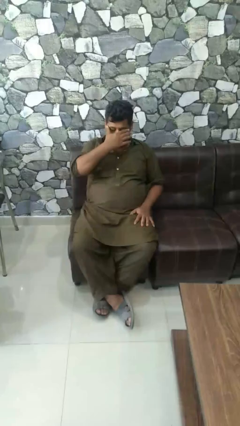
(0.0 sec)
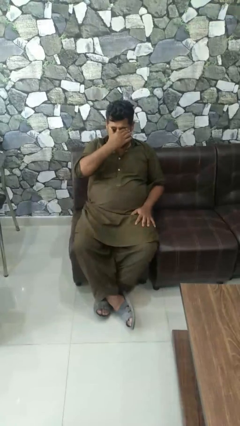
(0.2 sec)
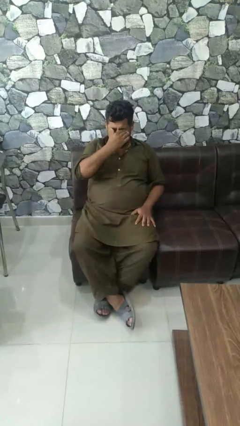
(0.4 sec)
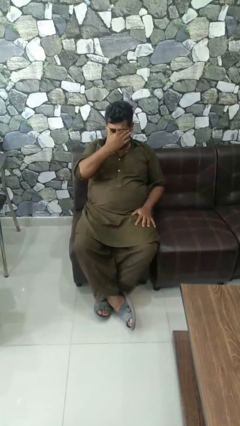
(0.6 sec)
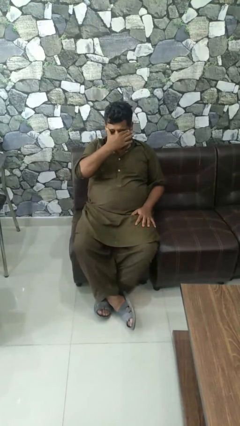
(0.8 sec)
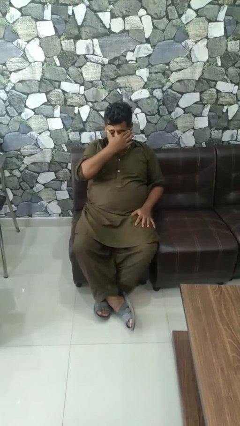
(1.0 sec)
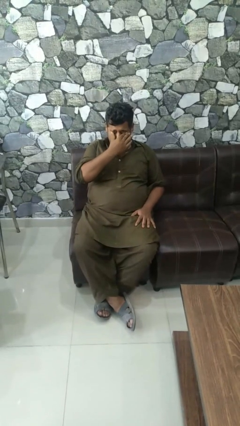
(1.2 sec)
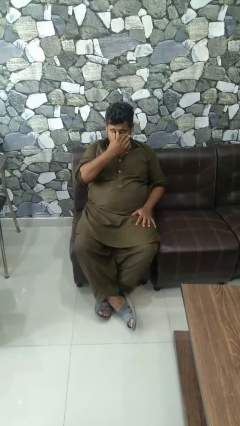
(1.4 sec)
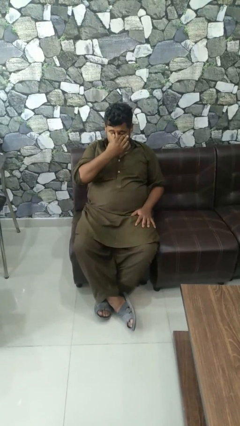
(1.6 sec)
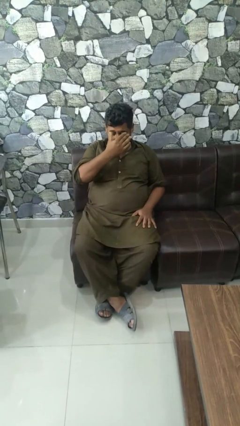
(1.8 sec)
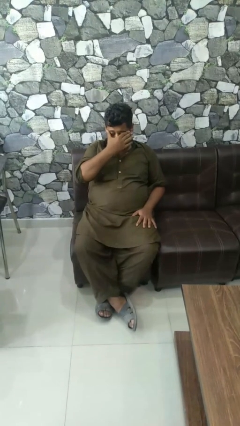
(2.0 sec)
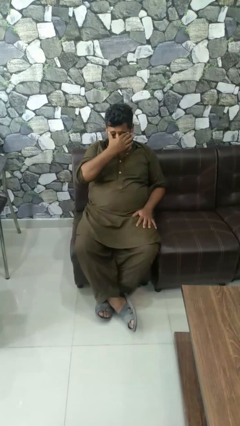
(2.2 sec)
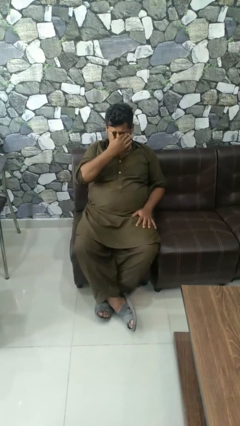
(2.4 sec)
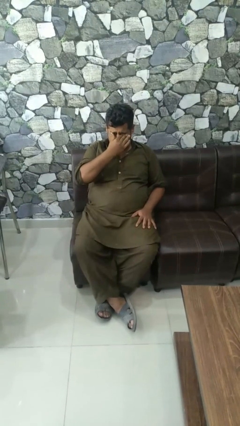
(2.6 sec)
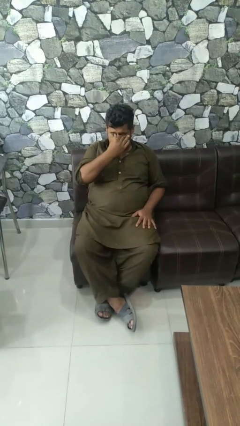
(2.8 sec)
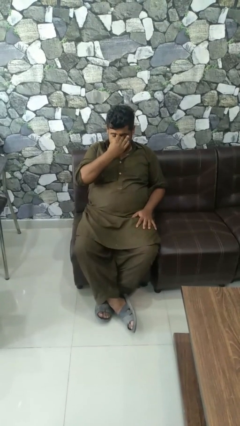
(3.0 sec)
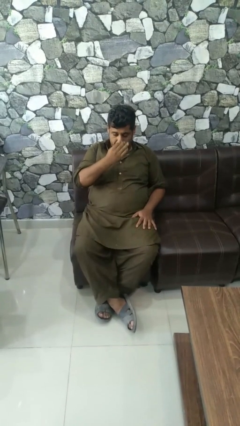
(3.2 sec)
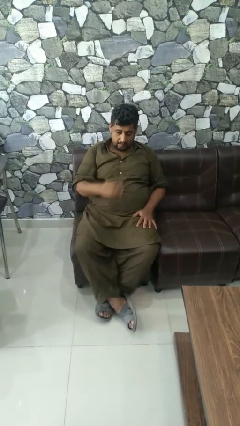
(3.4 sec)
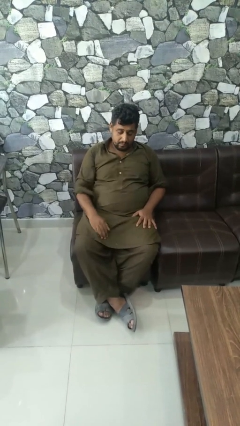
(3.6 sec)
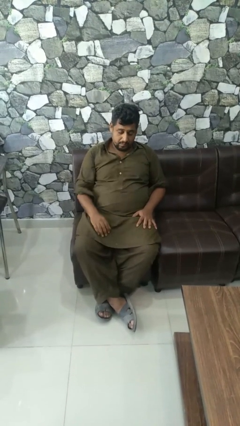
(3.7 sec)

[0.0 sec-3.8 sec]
person rubs eyes

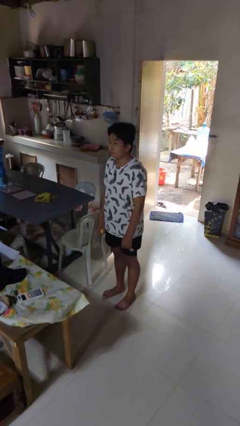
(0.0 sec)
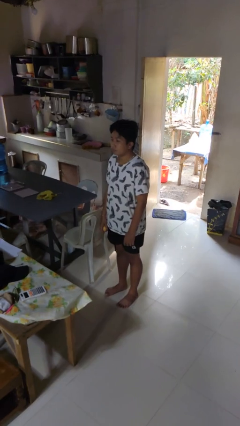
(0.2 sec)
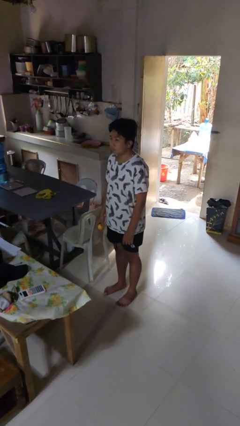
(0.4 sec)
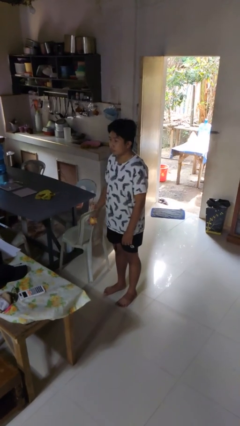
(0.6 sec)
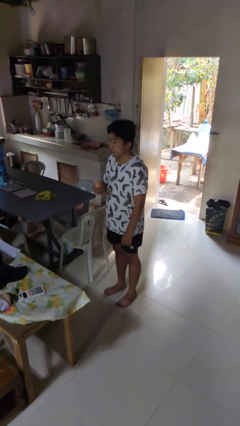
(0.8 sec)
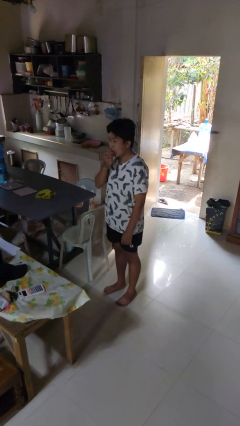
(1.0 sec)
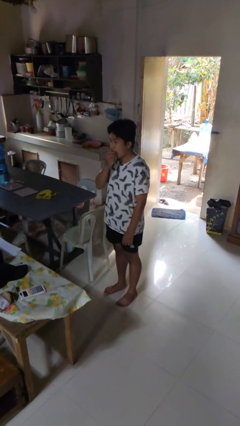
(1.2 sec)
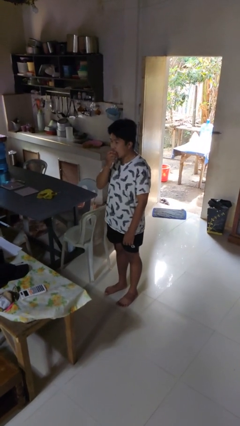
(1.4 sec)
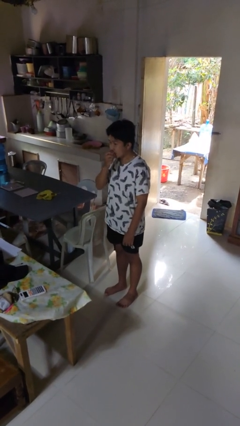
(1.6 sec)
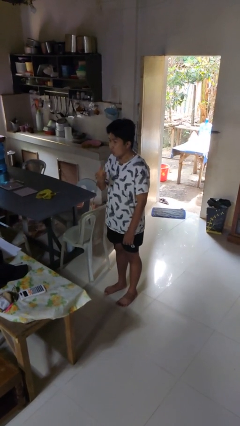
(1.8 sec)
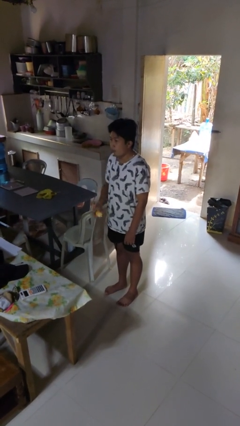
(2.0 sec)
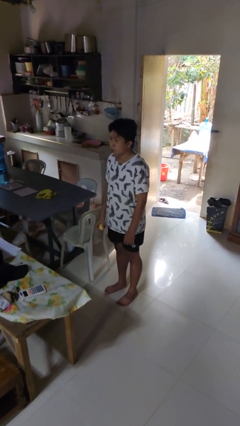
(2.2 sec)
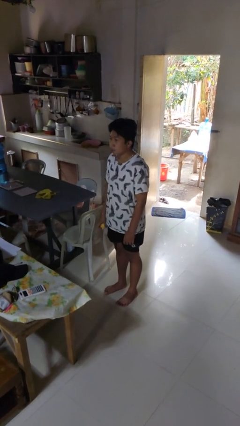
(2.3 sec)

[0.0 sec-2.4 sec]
person eats apple

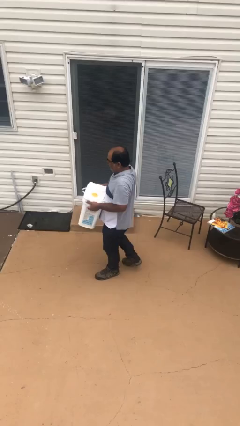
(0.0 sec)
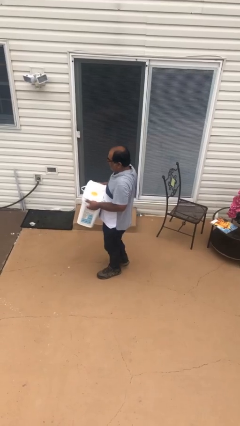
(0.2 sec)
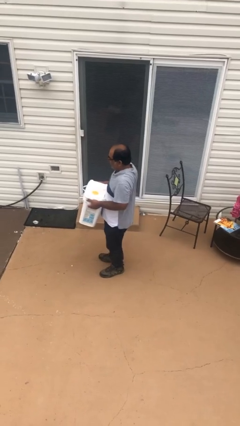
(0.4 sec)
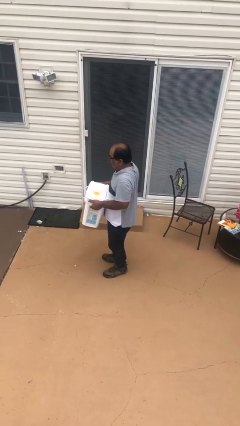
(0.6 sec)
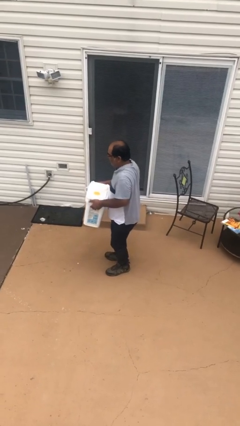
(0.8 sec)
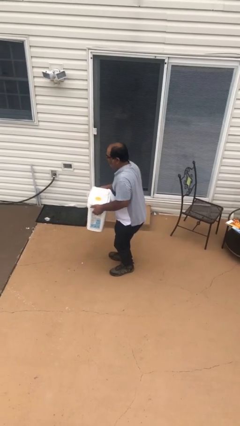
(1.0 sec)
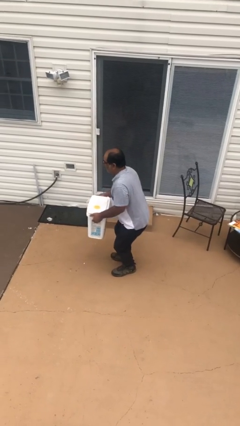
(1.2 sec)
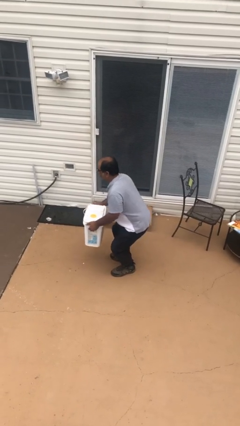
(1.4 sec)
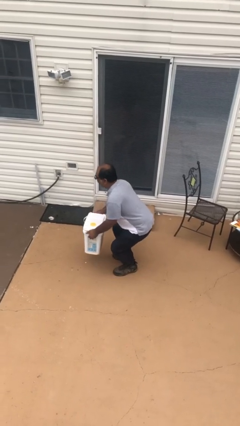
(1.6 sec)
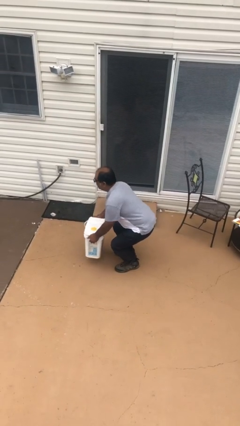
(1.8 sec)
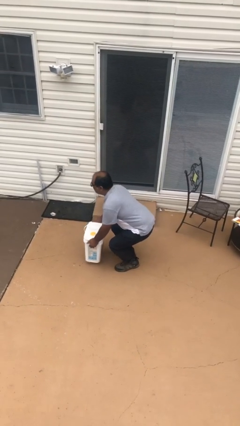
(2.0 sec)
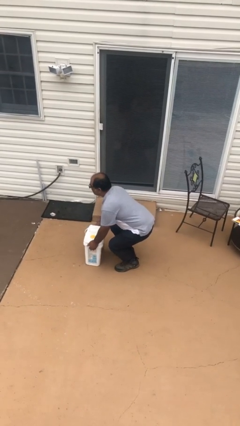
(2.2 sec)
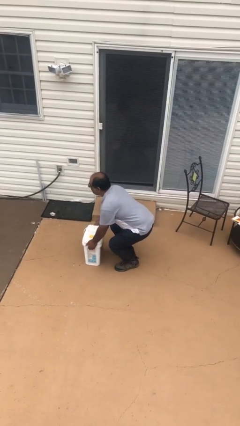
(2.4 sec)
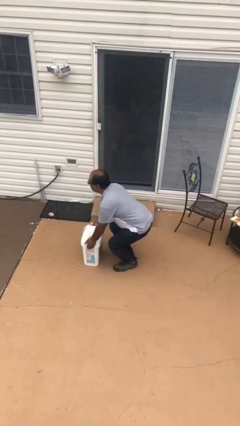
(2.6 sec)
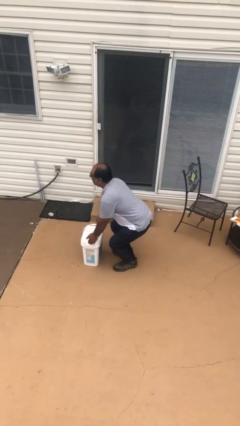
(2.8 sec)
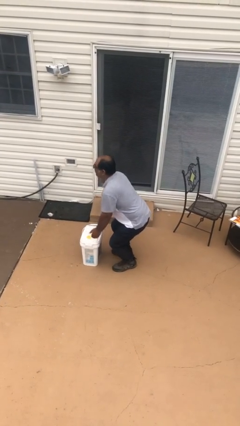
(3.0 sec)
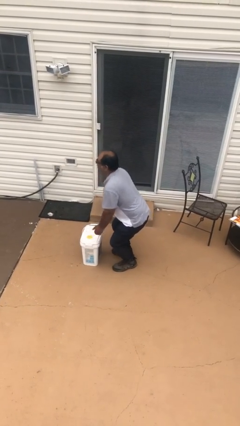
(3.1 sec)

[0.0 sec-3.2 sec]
person puts down object on floor

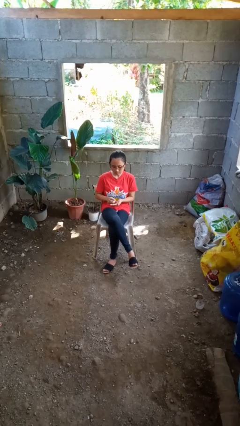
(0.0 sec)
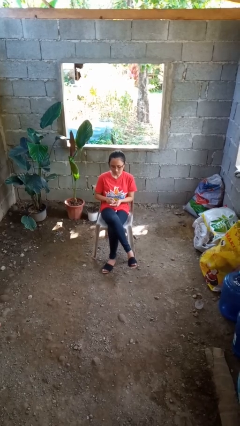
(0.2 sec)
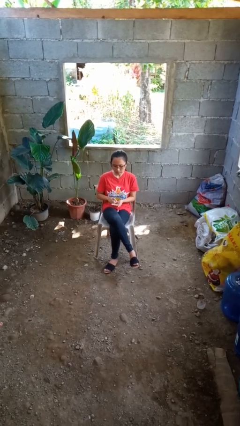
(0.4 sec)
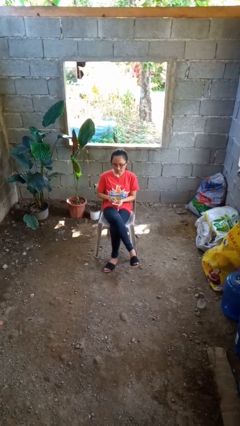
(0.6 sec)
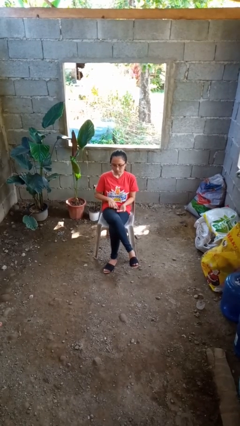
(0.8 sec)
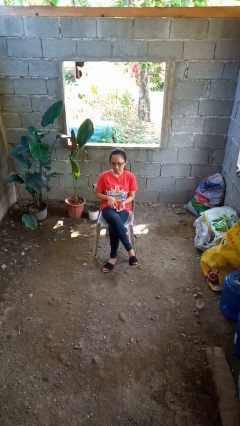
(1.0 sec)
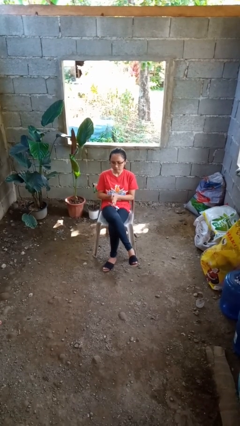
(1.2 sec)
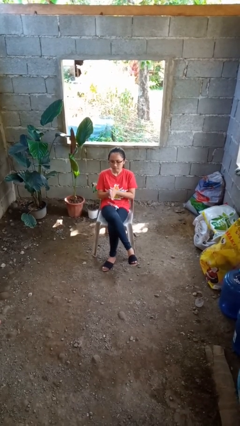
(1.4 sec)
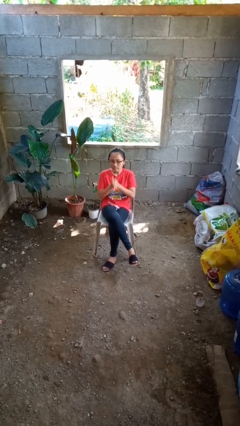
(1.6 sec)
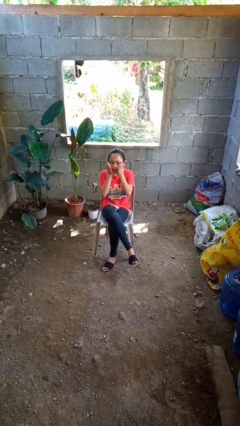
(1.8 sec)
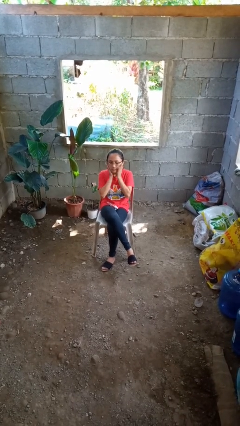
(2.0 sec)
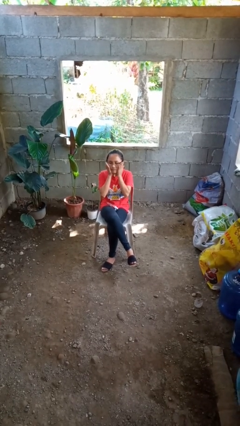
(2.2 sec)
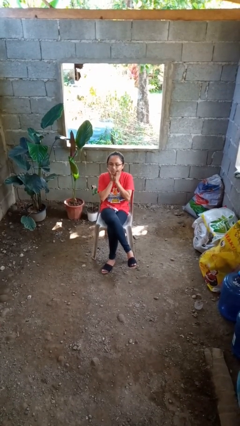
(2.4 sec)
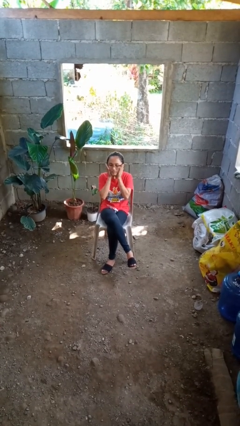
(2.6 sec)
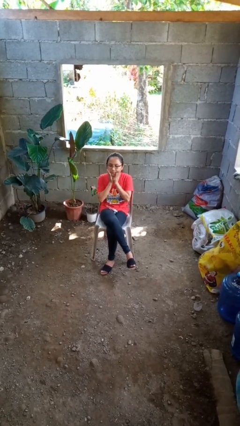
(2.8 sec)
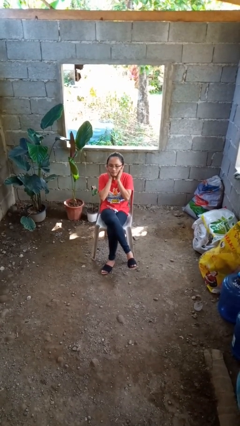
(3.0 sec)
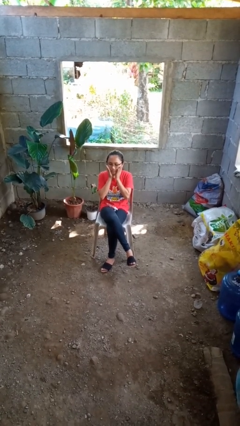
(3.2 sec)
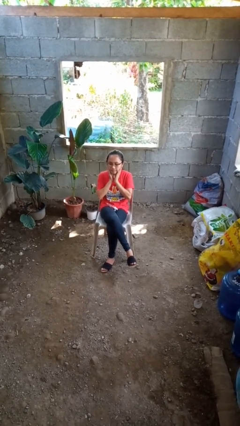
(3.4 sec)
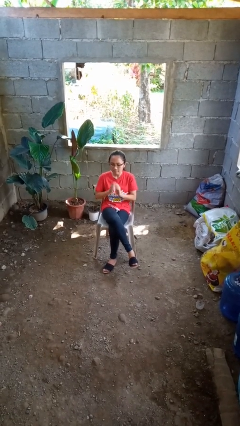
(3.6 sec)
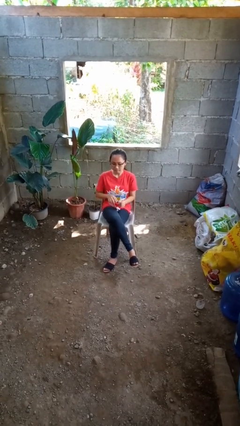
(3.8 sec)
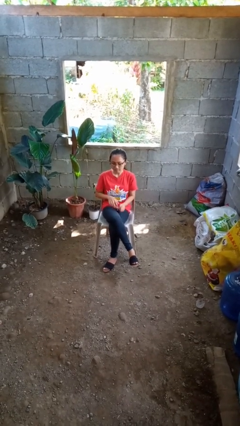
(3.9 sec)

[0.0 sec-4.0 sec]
person applies facial moisturizer

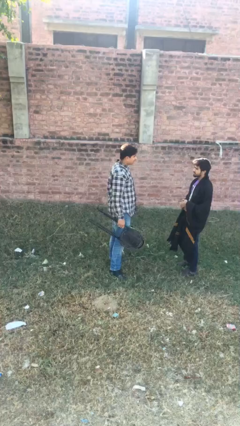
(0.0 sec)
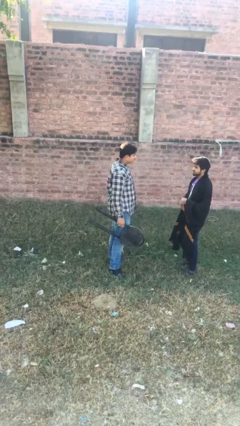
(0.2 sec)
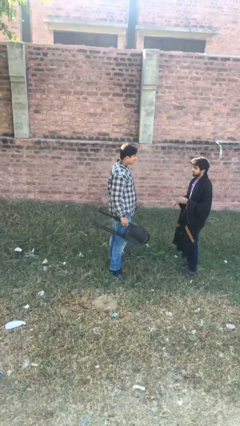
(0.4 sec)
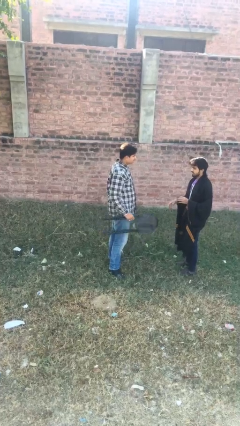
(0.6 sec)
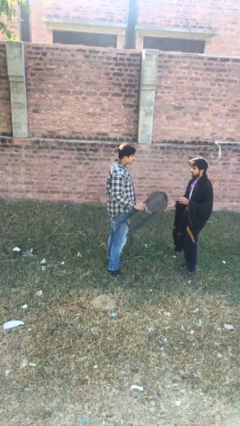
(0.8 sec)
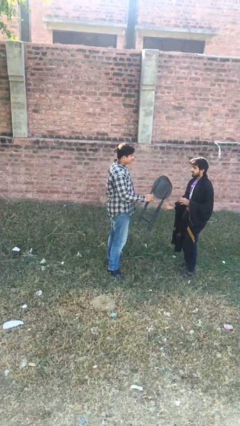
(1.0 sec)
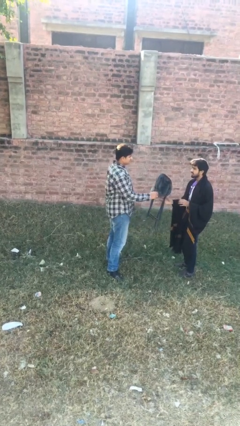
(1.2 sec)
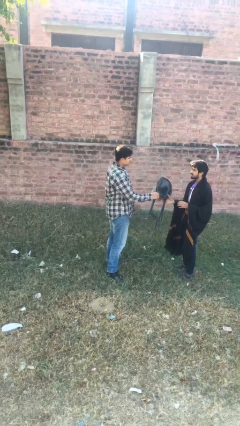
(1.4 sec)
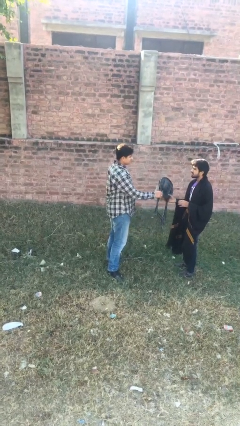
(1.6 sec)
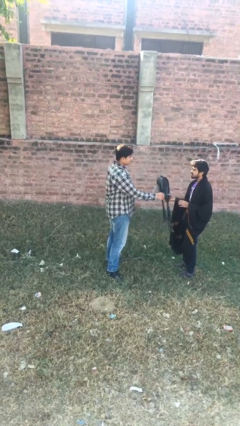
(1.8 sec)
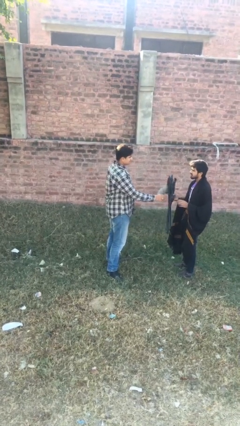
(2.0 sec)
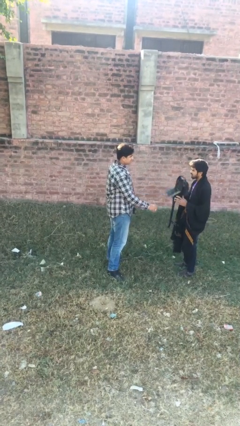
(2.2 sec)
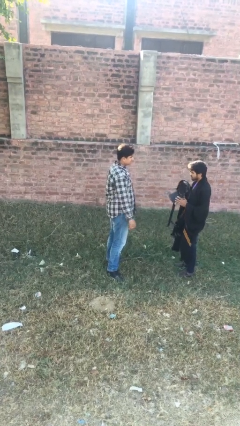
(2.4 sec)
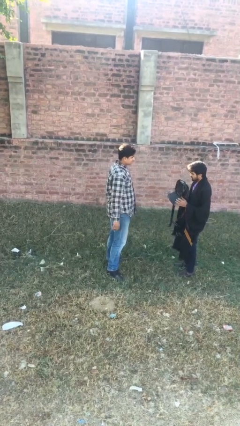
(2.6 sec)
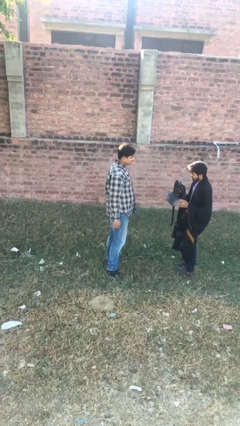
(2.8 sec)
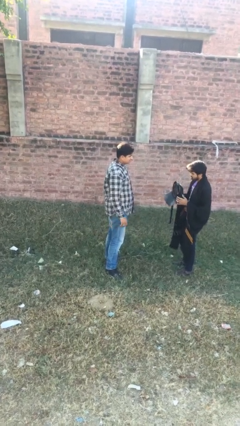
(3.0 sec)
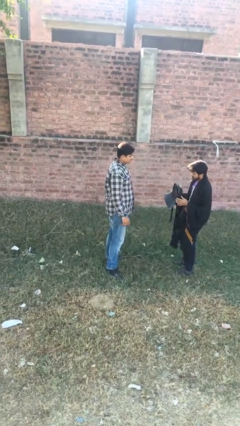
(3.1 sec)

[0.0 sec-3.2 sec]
person transfers object to person

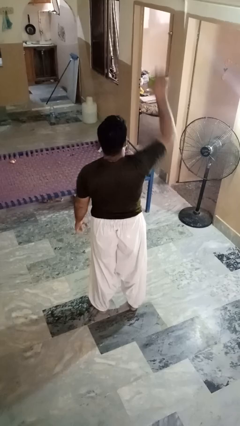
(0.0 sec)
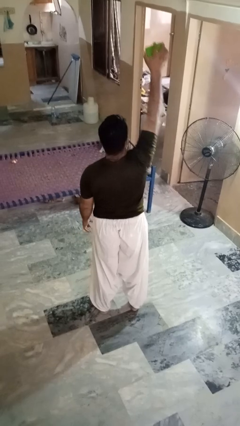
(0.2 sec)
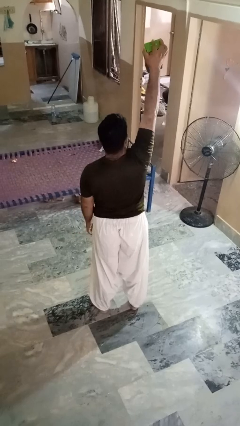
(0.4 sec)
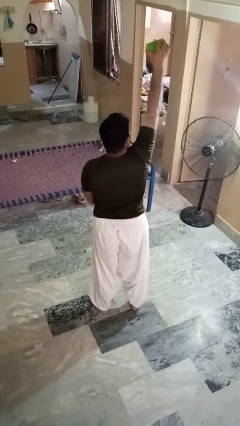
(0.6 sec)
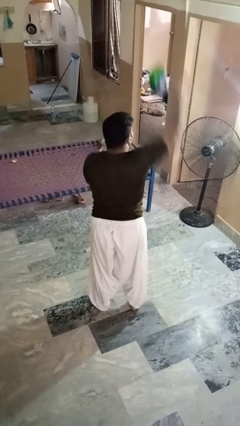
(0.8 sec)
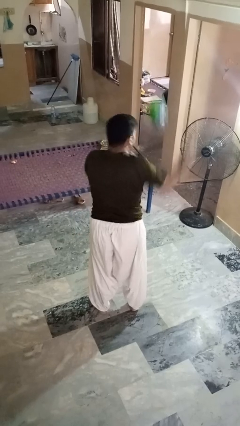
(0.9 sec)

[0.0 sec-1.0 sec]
person drops object
